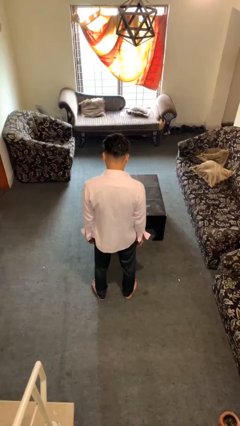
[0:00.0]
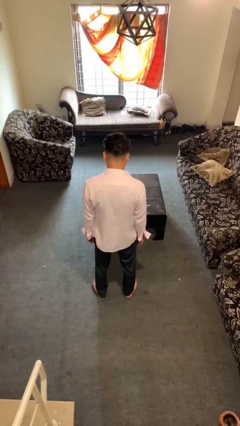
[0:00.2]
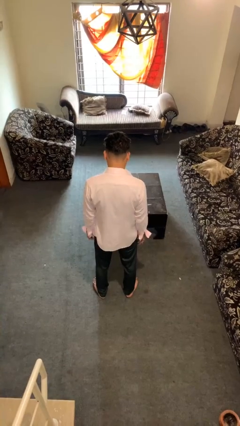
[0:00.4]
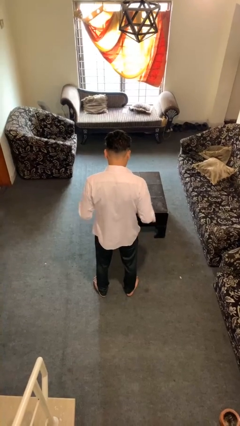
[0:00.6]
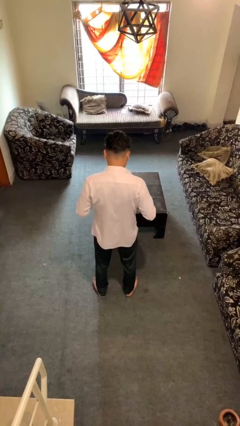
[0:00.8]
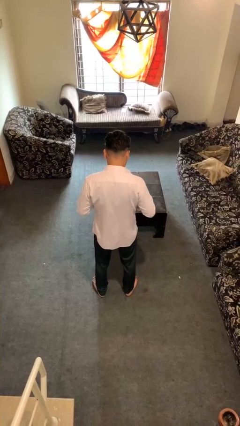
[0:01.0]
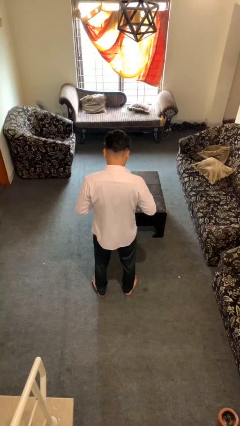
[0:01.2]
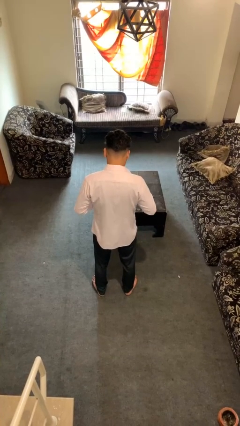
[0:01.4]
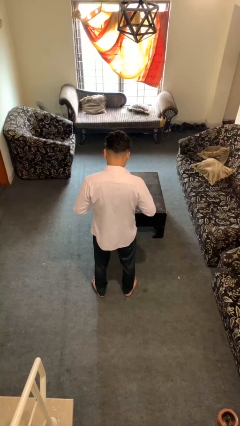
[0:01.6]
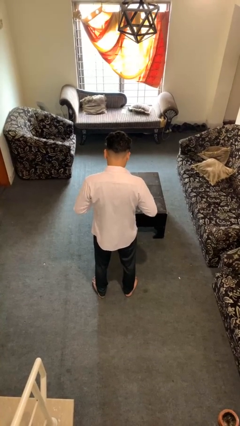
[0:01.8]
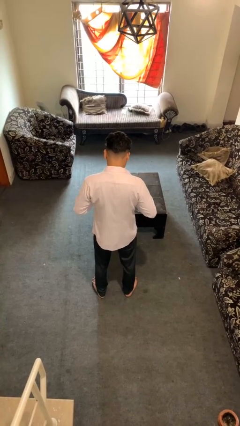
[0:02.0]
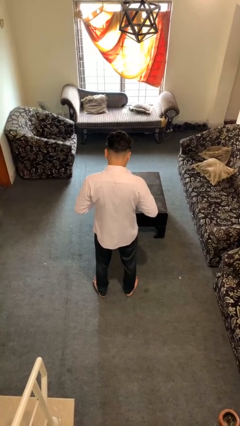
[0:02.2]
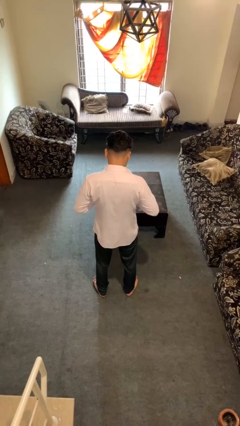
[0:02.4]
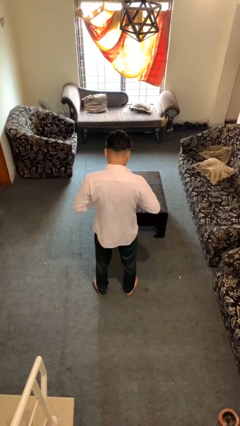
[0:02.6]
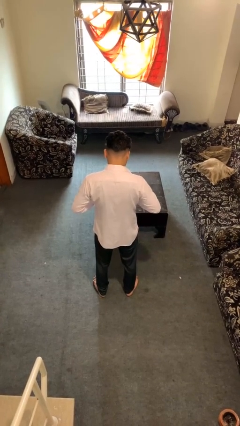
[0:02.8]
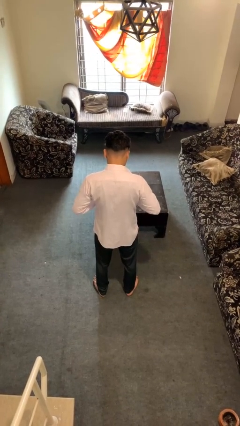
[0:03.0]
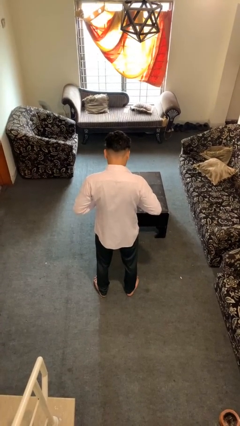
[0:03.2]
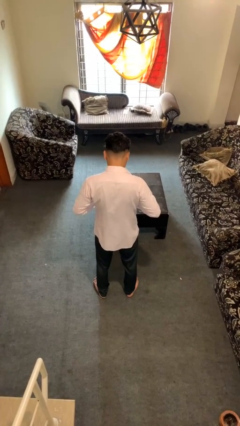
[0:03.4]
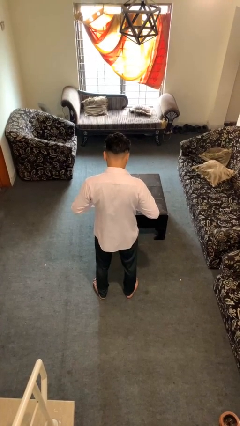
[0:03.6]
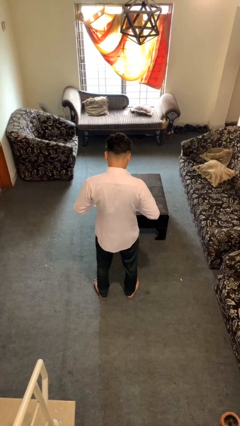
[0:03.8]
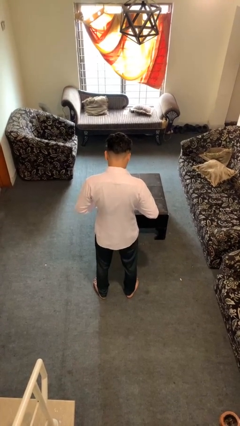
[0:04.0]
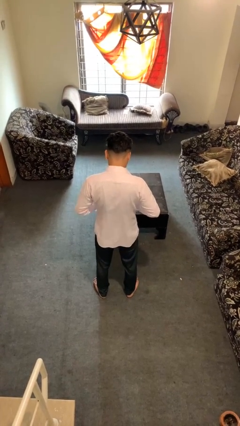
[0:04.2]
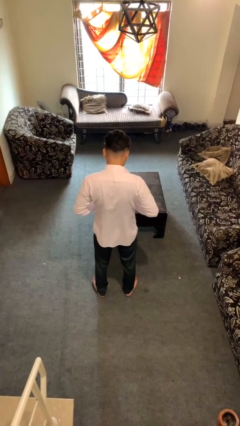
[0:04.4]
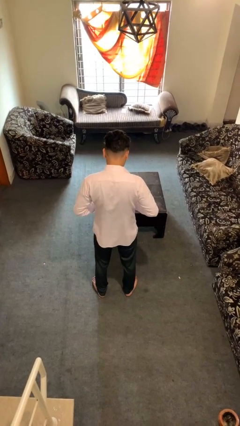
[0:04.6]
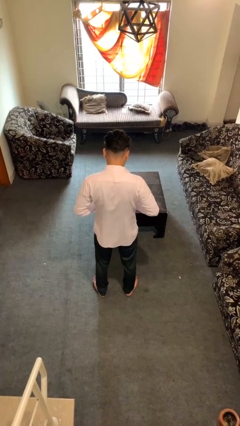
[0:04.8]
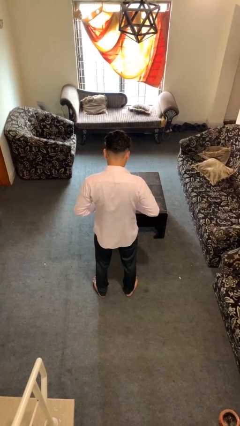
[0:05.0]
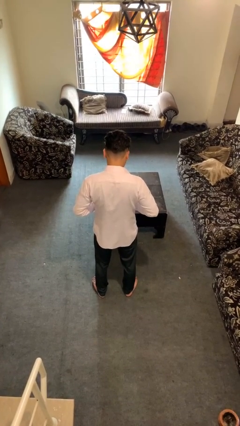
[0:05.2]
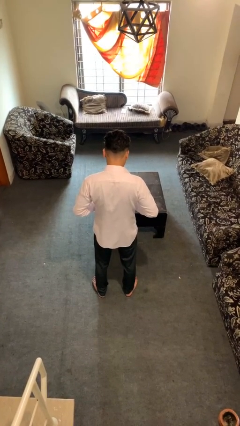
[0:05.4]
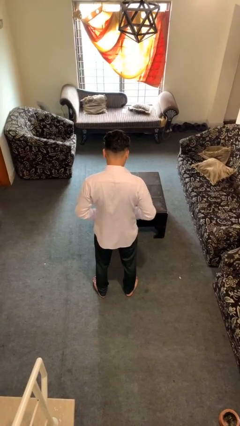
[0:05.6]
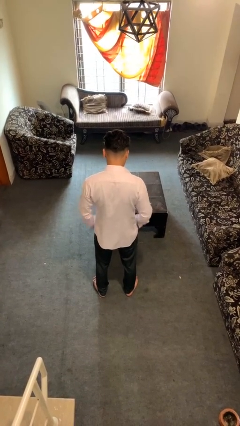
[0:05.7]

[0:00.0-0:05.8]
person buttons shirt

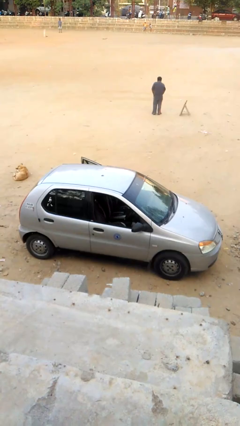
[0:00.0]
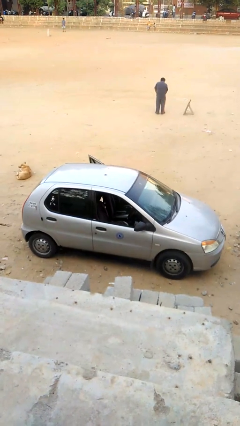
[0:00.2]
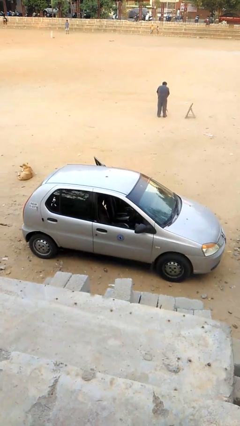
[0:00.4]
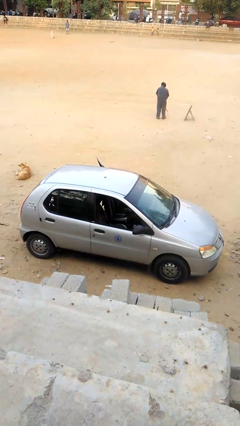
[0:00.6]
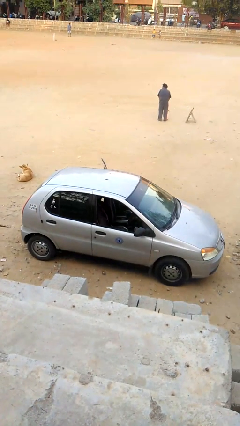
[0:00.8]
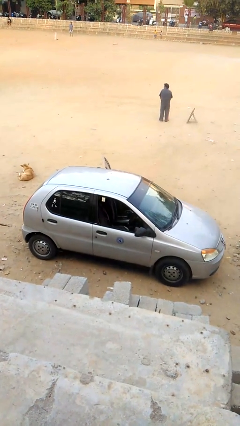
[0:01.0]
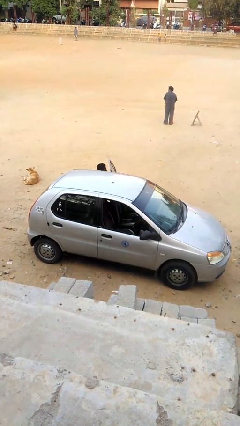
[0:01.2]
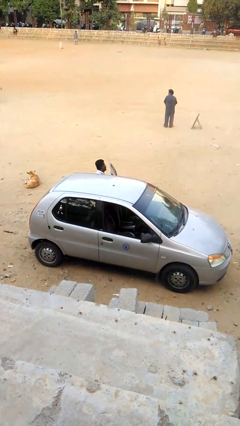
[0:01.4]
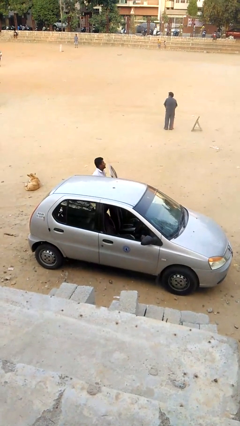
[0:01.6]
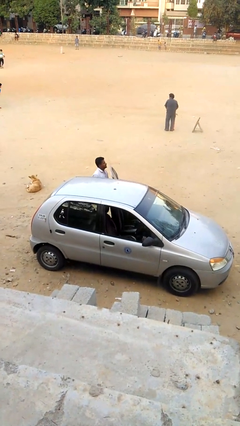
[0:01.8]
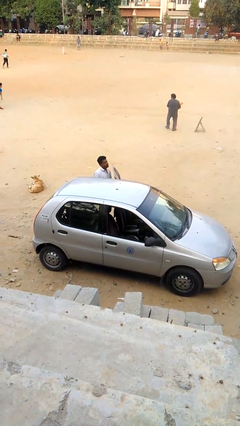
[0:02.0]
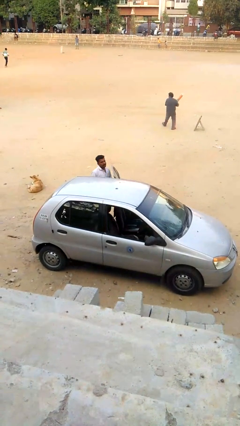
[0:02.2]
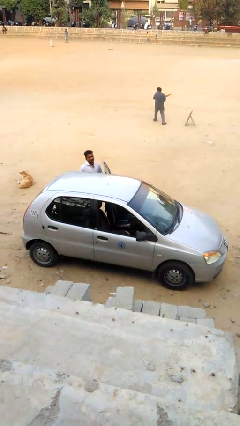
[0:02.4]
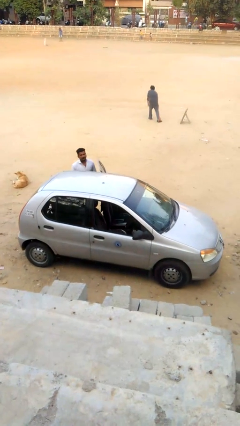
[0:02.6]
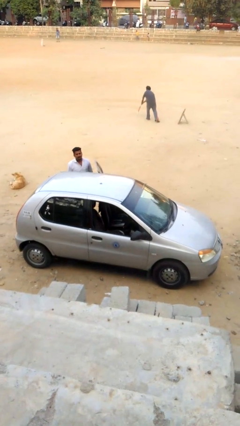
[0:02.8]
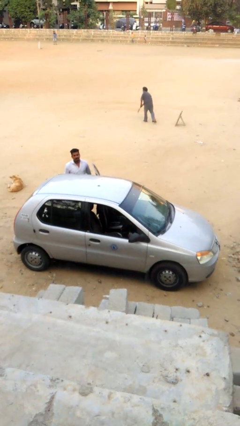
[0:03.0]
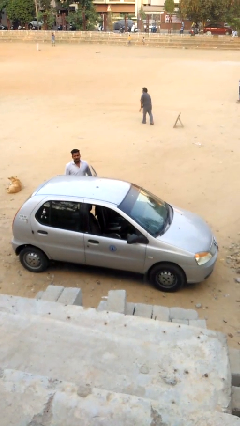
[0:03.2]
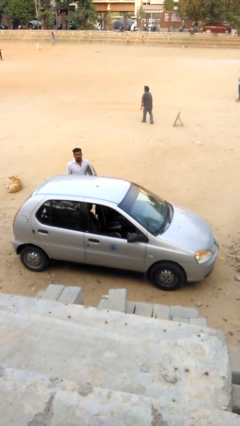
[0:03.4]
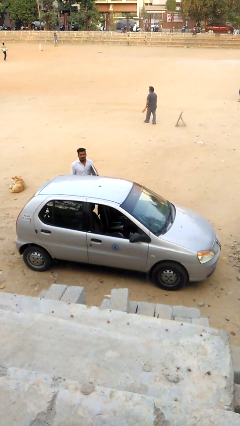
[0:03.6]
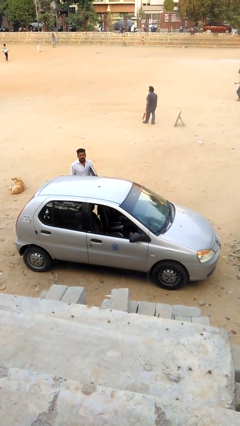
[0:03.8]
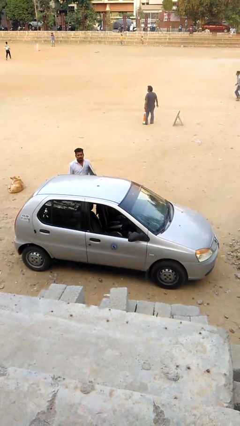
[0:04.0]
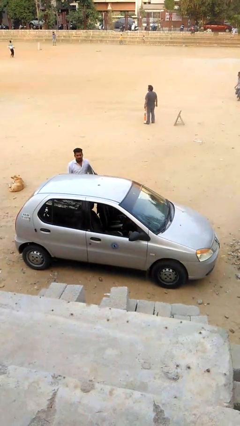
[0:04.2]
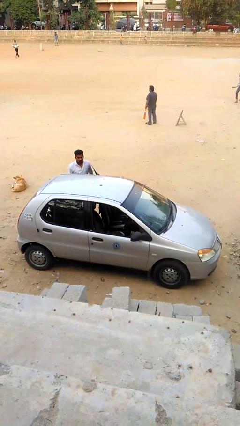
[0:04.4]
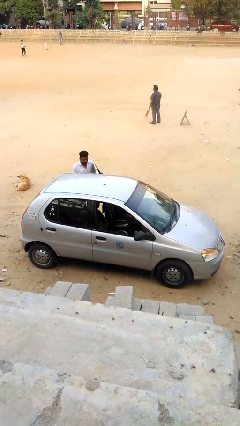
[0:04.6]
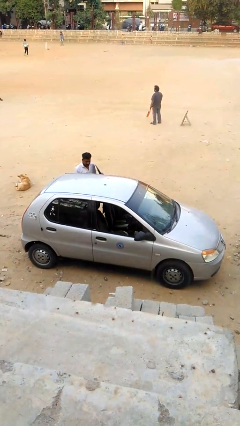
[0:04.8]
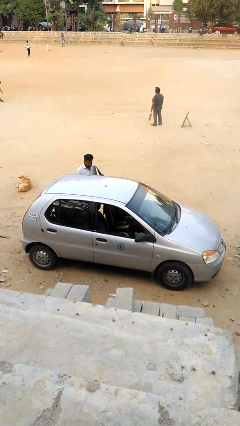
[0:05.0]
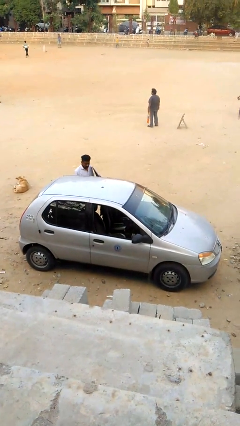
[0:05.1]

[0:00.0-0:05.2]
car drops off person

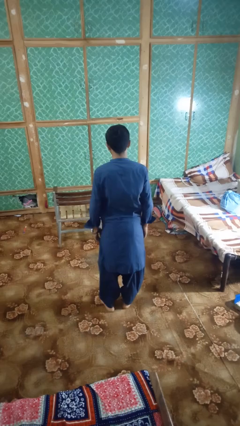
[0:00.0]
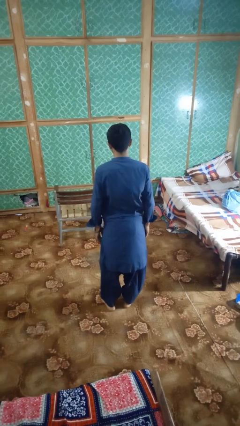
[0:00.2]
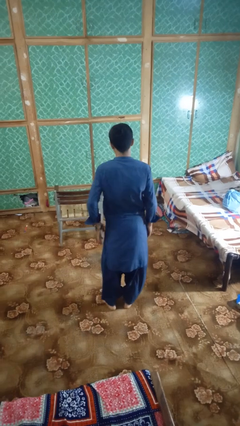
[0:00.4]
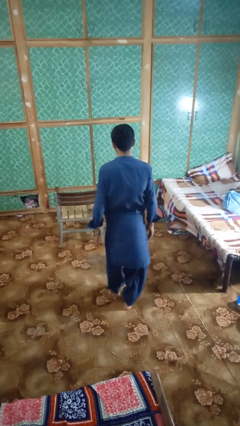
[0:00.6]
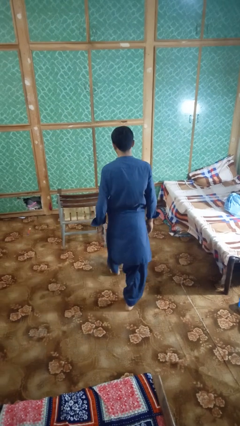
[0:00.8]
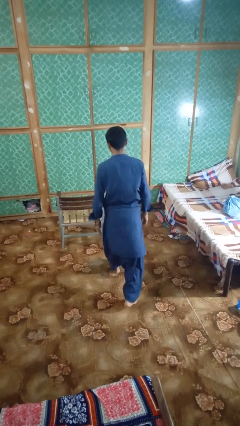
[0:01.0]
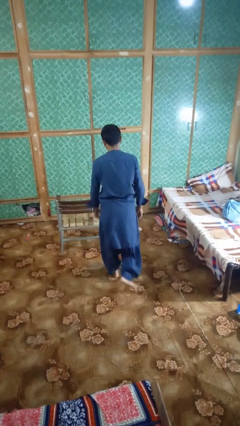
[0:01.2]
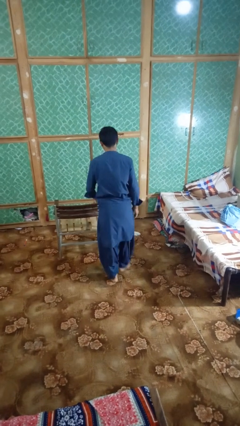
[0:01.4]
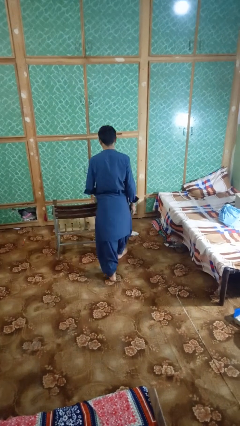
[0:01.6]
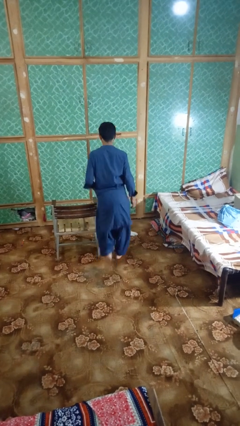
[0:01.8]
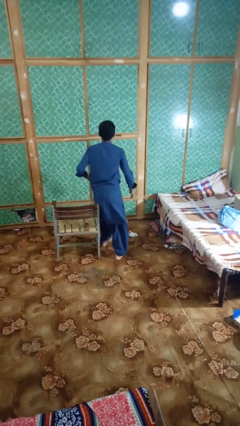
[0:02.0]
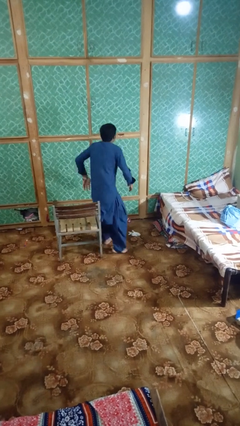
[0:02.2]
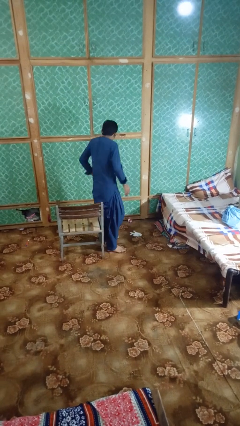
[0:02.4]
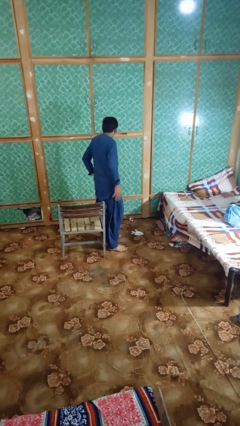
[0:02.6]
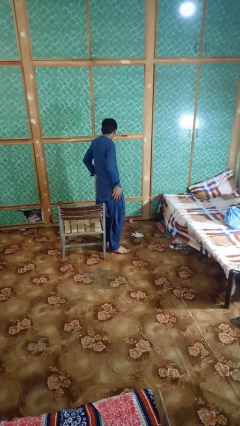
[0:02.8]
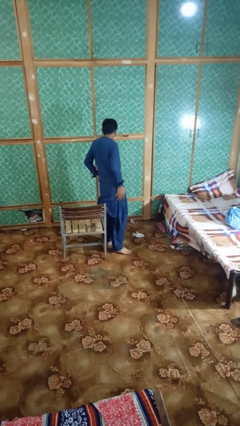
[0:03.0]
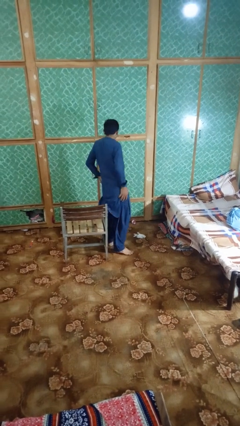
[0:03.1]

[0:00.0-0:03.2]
person bumps into table

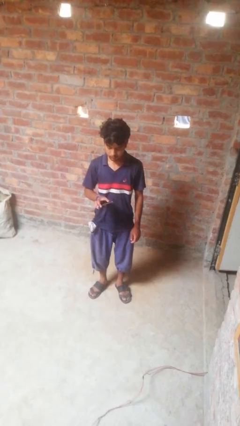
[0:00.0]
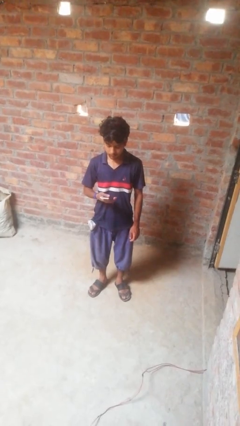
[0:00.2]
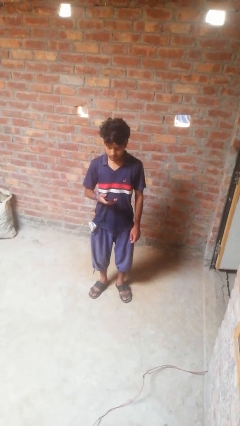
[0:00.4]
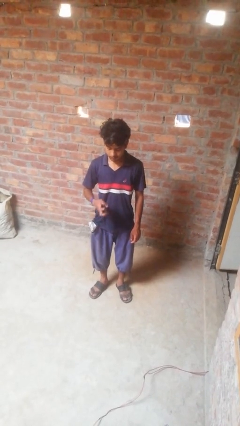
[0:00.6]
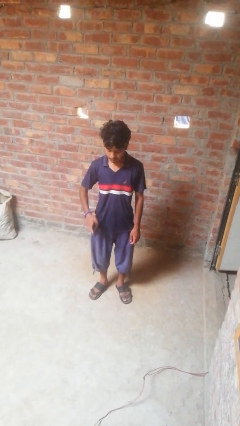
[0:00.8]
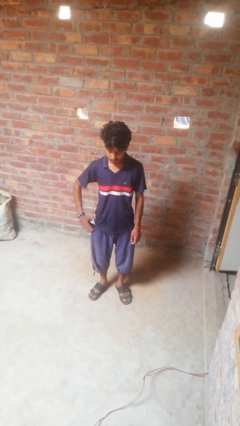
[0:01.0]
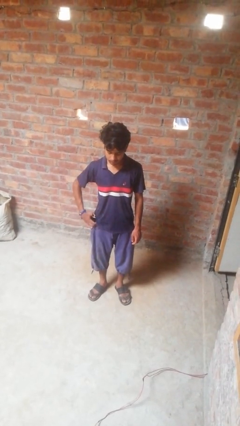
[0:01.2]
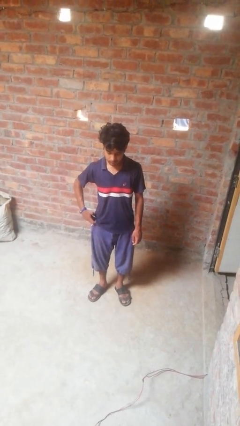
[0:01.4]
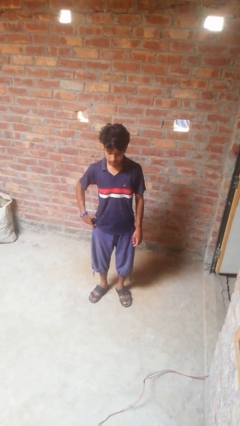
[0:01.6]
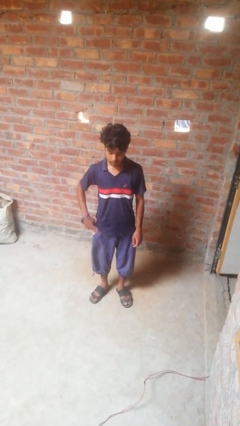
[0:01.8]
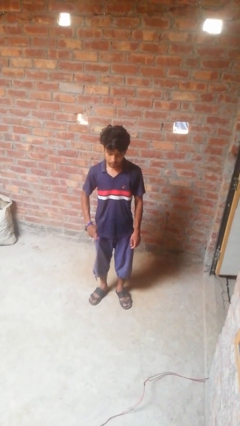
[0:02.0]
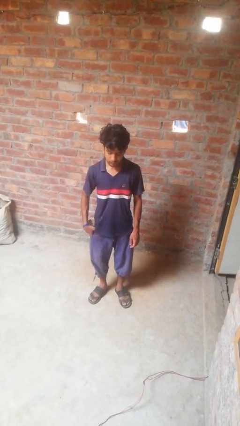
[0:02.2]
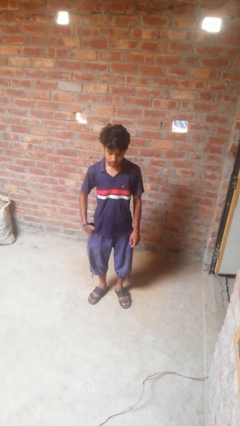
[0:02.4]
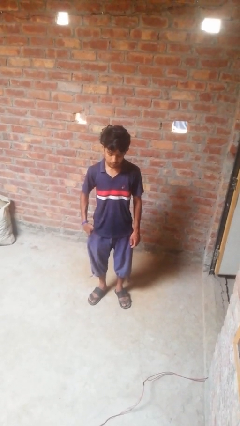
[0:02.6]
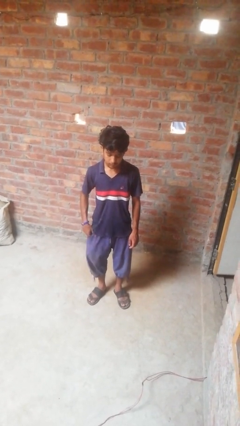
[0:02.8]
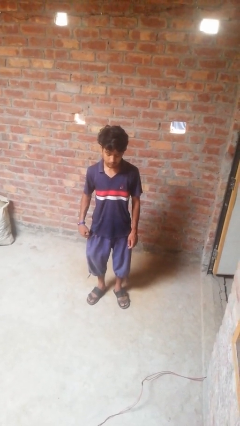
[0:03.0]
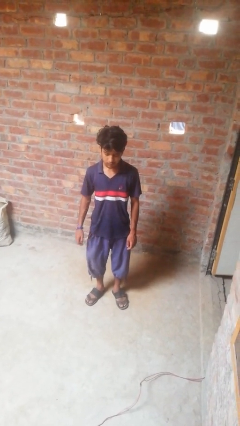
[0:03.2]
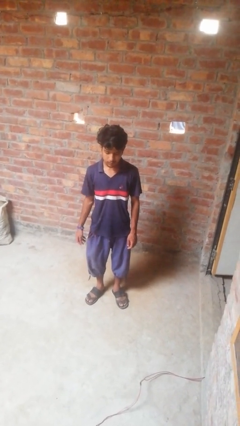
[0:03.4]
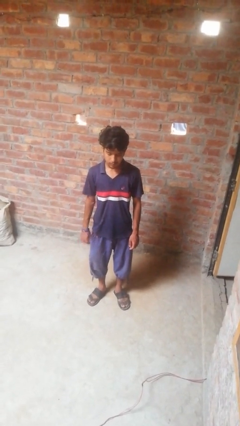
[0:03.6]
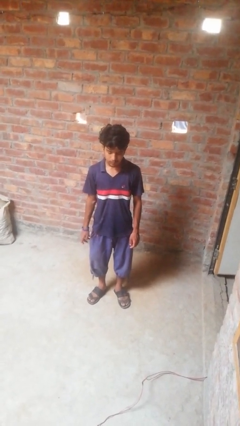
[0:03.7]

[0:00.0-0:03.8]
person puts phone into pocket

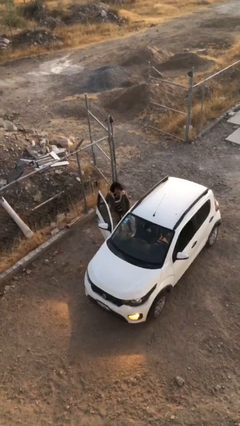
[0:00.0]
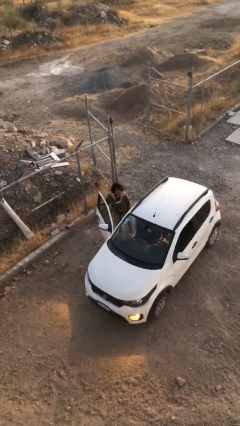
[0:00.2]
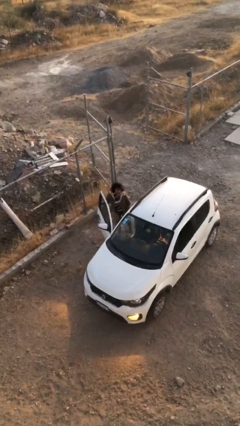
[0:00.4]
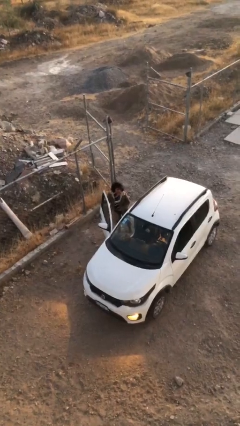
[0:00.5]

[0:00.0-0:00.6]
person closes car door
